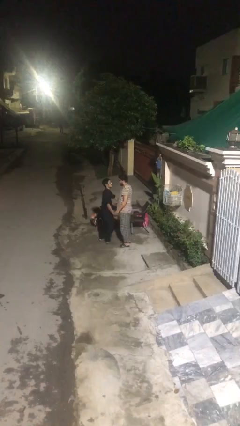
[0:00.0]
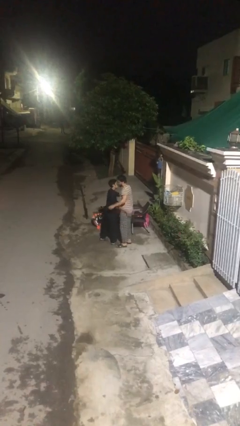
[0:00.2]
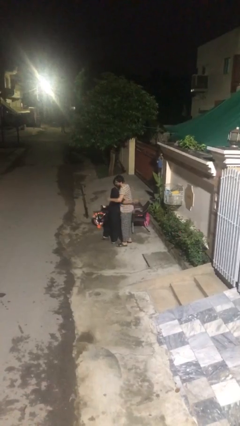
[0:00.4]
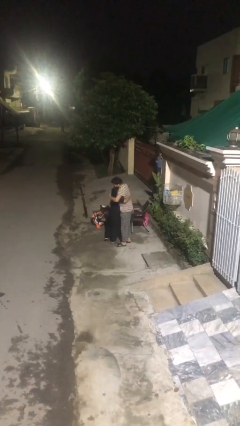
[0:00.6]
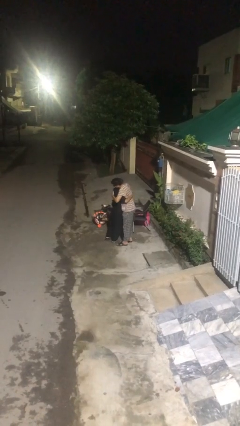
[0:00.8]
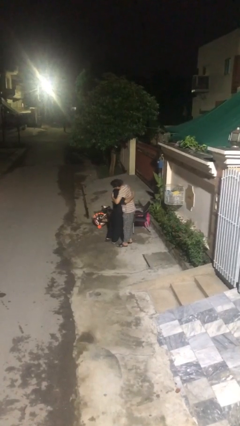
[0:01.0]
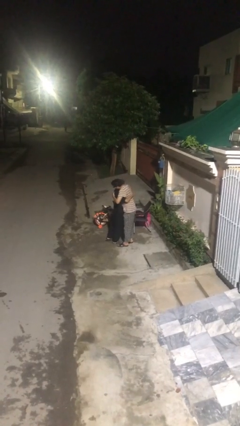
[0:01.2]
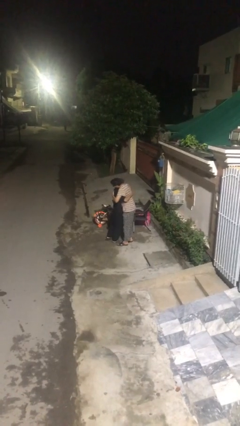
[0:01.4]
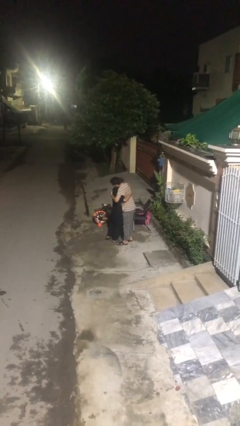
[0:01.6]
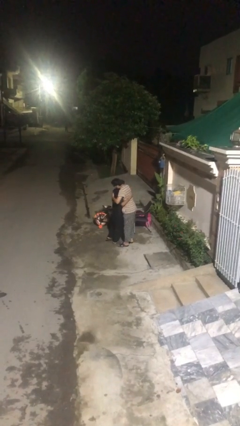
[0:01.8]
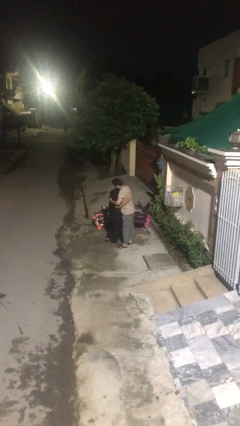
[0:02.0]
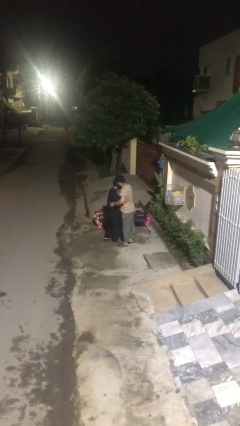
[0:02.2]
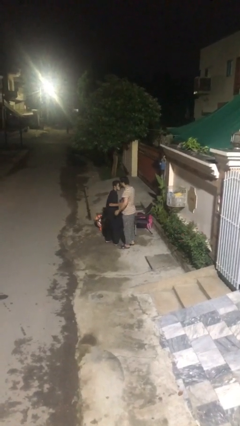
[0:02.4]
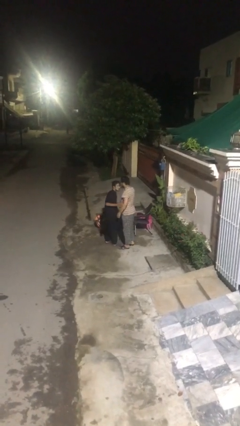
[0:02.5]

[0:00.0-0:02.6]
person embraces person

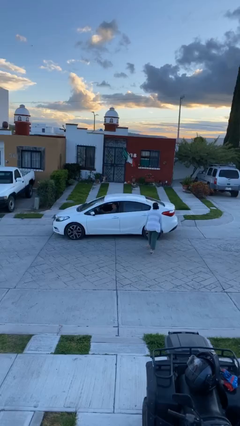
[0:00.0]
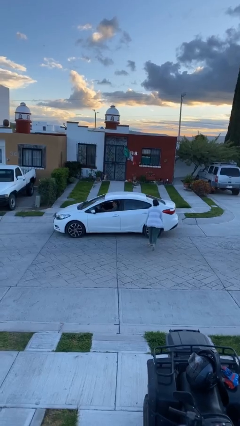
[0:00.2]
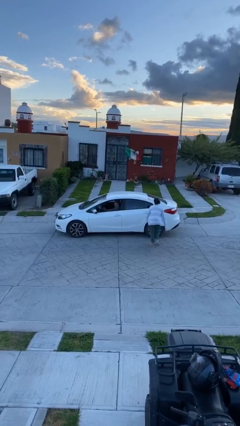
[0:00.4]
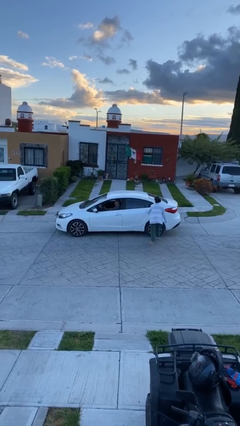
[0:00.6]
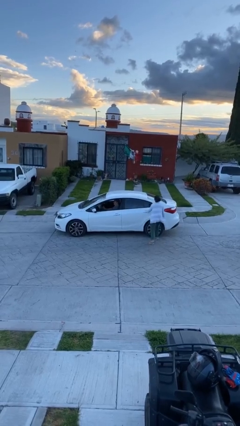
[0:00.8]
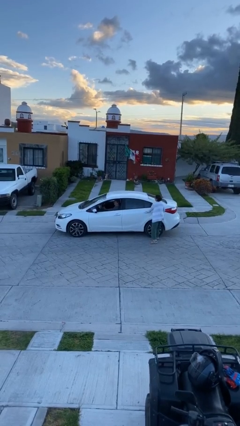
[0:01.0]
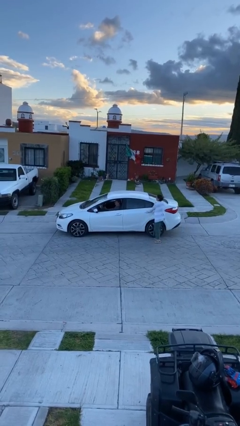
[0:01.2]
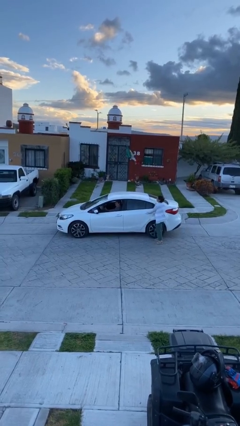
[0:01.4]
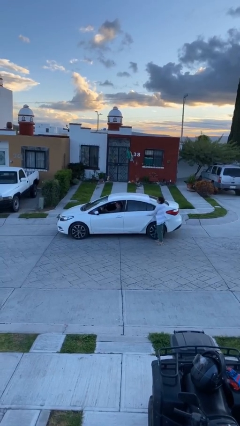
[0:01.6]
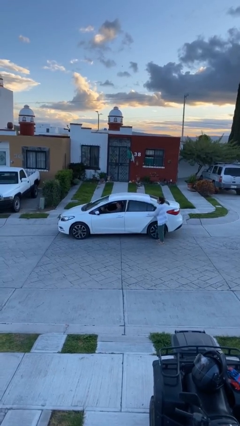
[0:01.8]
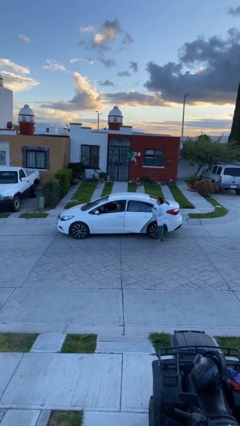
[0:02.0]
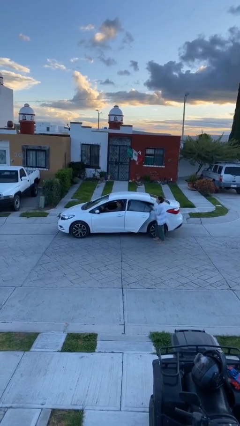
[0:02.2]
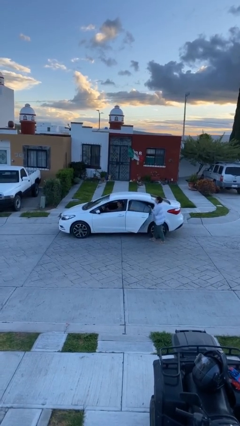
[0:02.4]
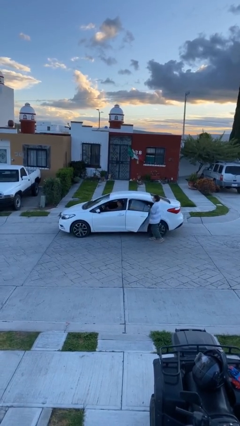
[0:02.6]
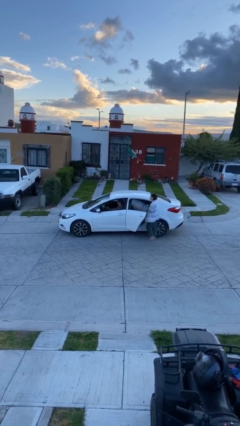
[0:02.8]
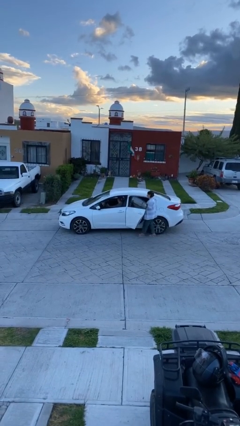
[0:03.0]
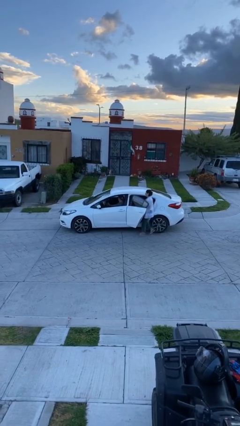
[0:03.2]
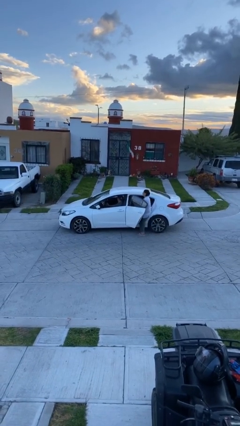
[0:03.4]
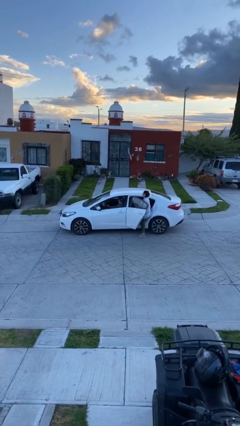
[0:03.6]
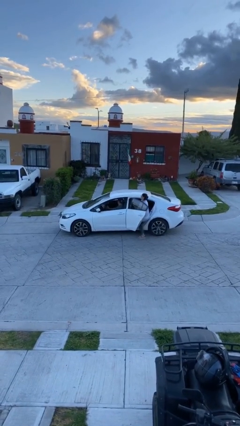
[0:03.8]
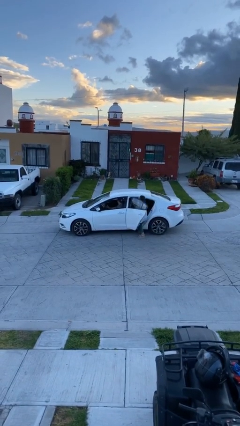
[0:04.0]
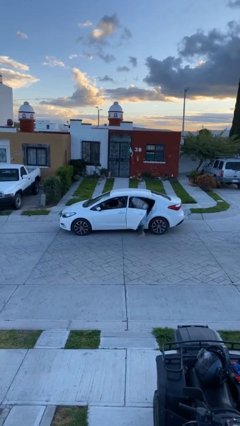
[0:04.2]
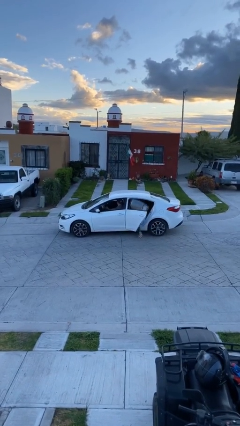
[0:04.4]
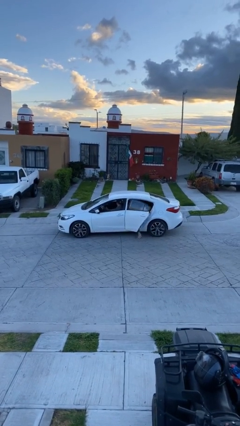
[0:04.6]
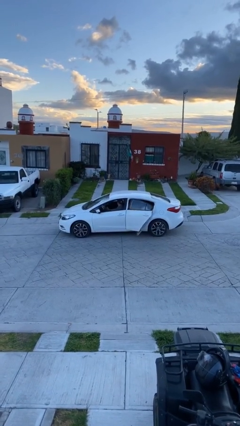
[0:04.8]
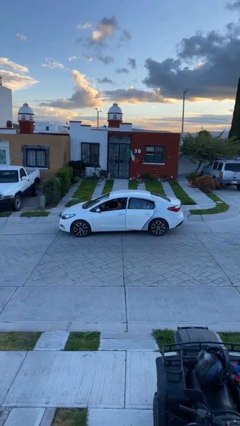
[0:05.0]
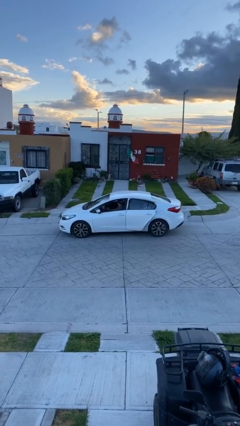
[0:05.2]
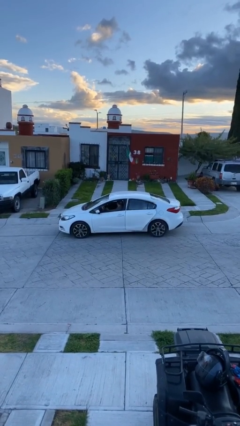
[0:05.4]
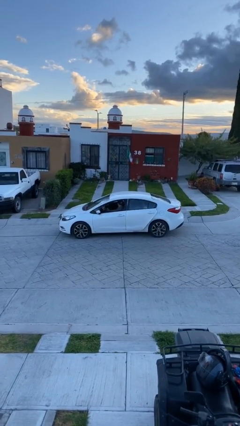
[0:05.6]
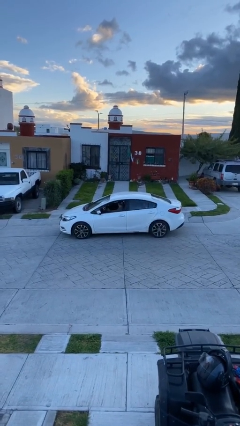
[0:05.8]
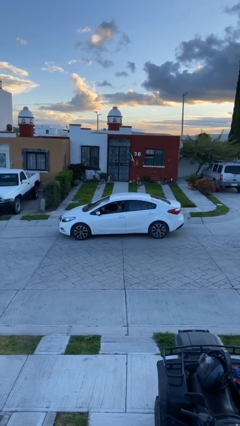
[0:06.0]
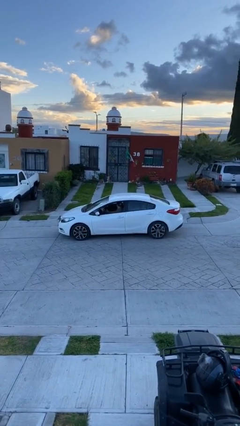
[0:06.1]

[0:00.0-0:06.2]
car picks up person

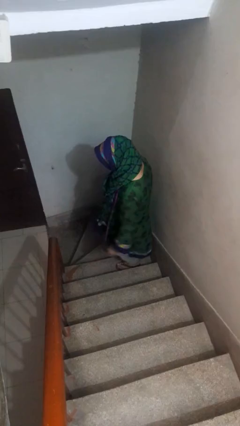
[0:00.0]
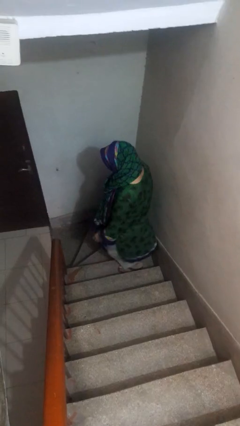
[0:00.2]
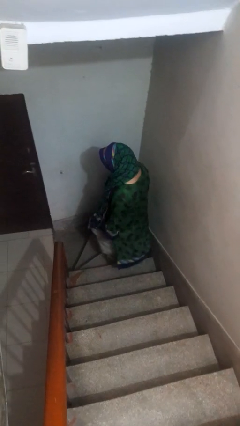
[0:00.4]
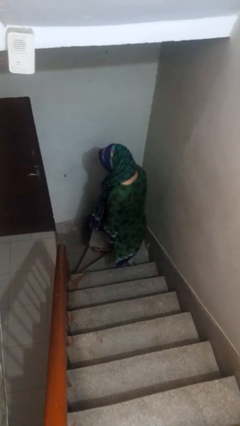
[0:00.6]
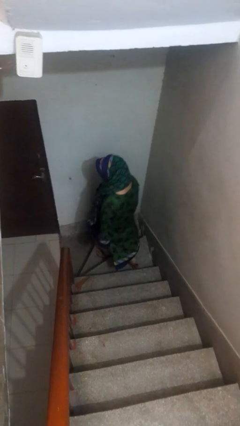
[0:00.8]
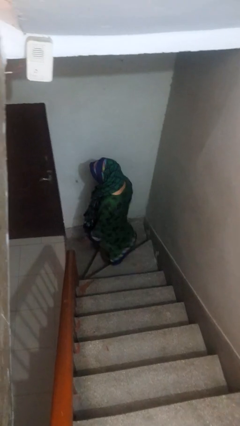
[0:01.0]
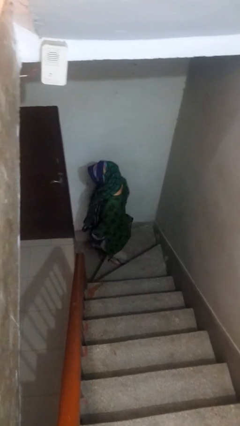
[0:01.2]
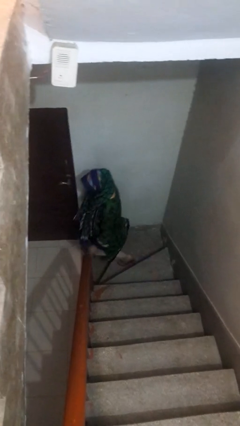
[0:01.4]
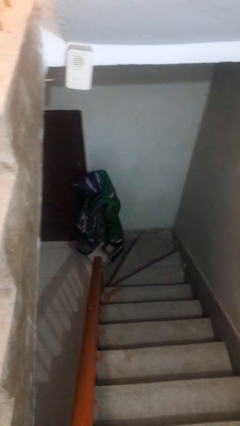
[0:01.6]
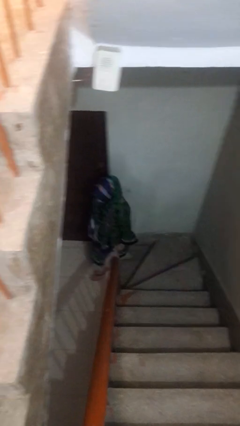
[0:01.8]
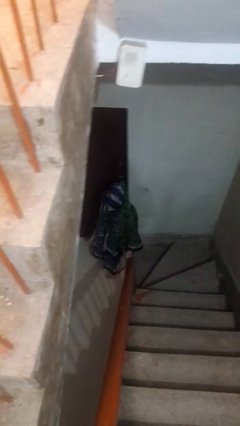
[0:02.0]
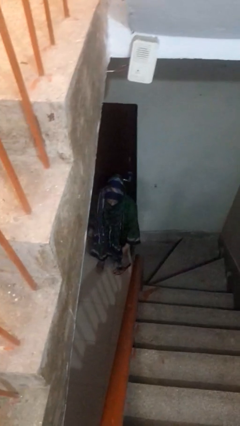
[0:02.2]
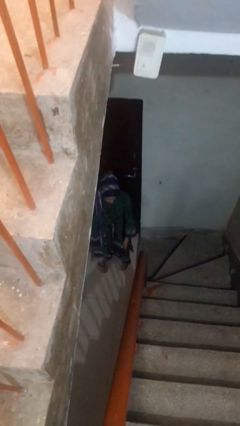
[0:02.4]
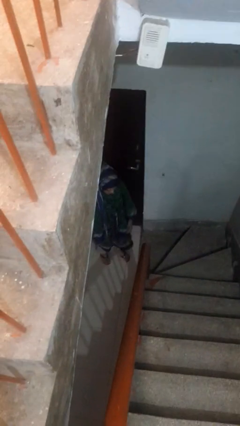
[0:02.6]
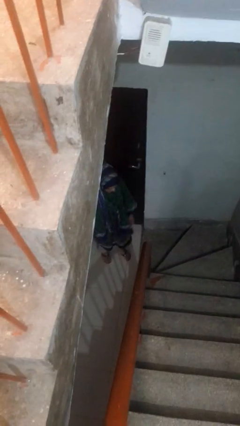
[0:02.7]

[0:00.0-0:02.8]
person climbs down stairs

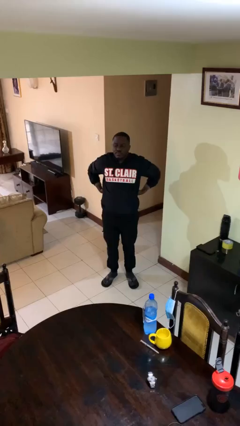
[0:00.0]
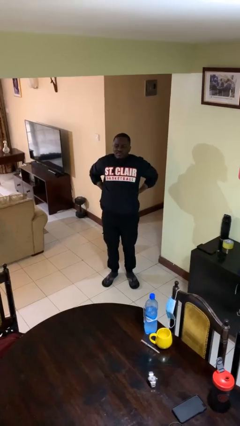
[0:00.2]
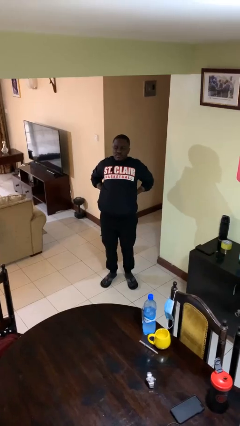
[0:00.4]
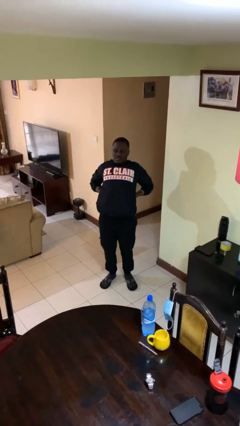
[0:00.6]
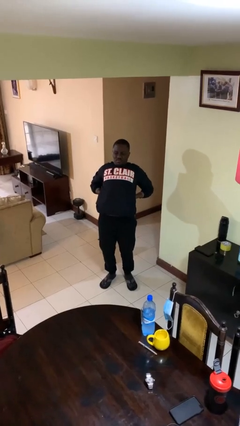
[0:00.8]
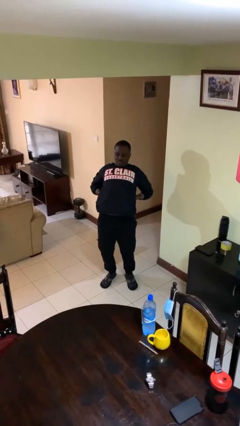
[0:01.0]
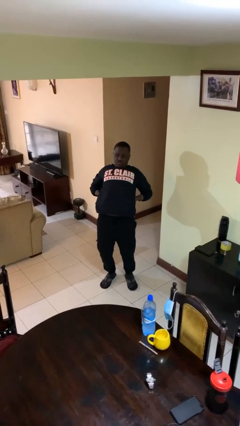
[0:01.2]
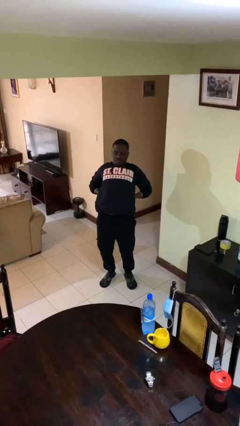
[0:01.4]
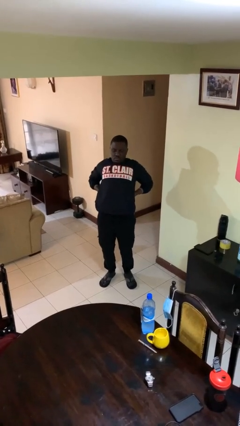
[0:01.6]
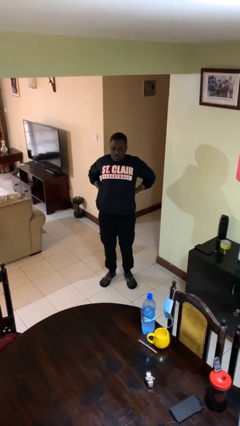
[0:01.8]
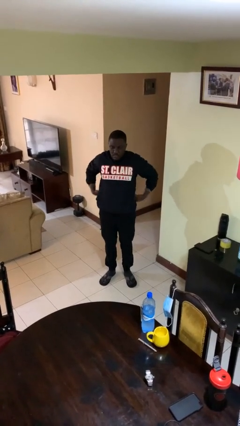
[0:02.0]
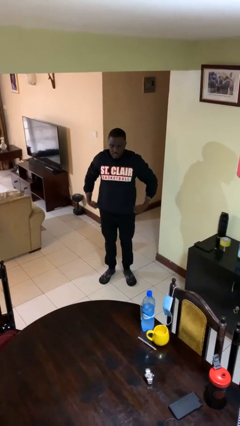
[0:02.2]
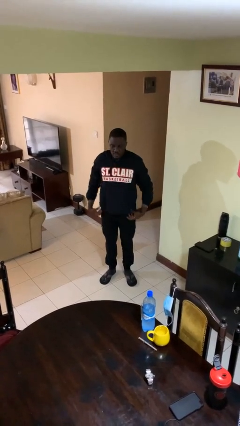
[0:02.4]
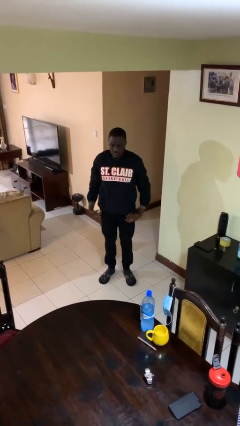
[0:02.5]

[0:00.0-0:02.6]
person stretches back

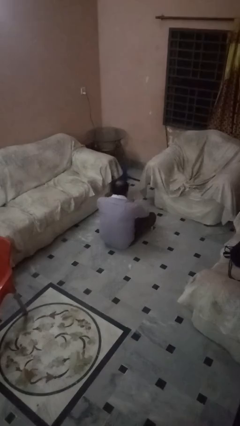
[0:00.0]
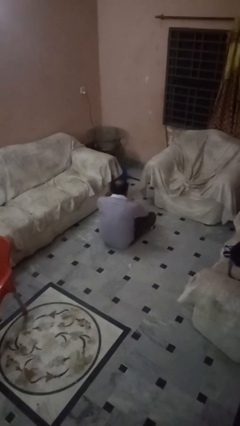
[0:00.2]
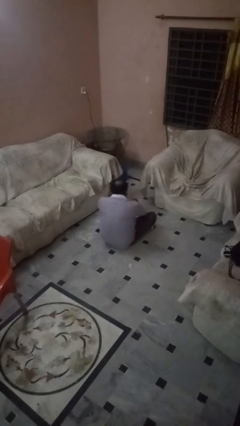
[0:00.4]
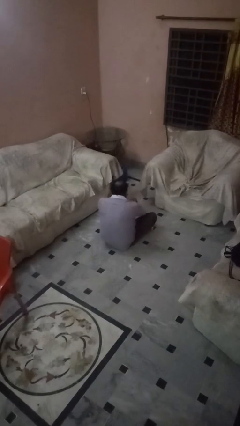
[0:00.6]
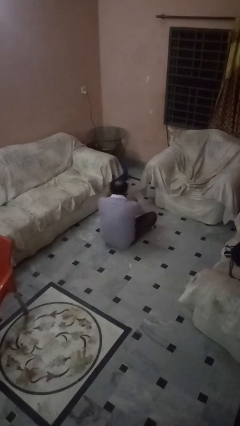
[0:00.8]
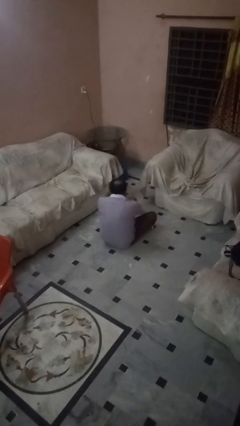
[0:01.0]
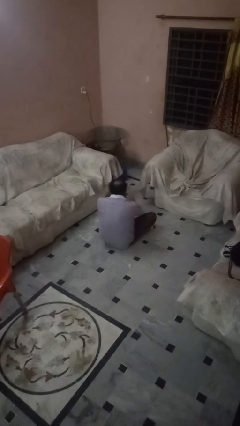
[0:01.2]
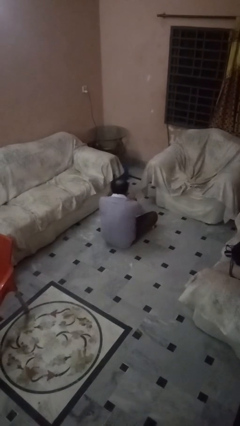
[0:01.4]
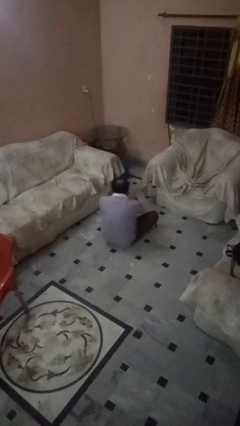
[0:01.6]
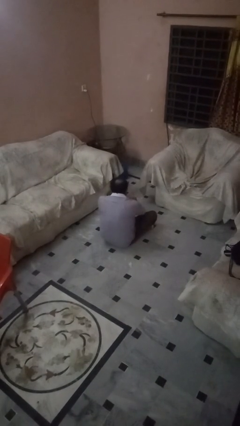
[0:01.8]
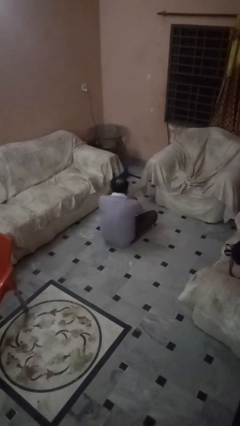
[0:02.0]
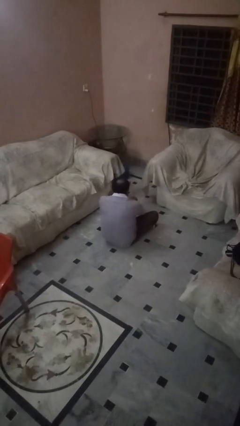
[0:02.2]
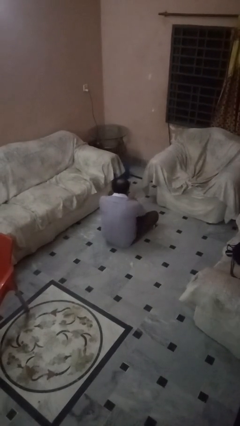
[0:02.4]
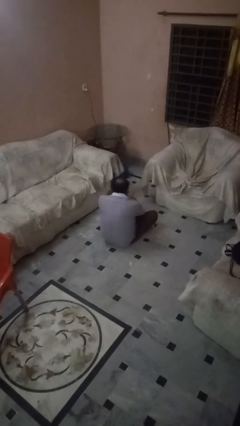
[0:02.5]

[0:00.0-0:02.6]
person rubs foot

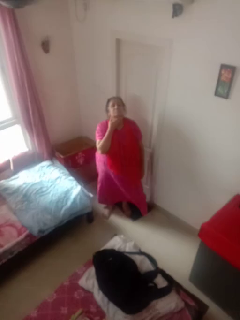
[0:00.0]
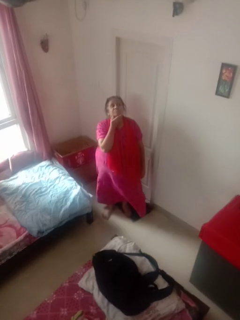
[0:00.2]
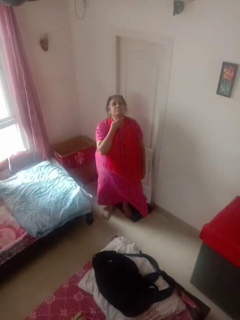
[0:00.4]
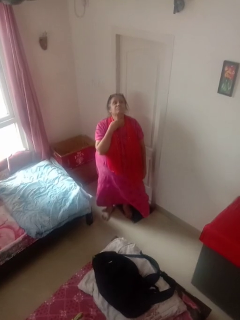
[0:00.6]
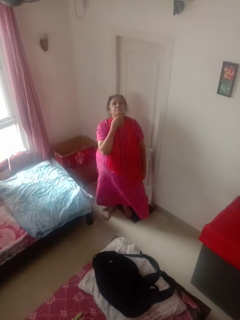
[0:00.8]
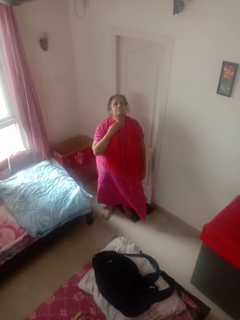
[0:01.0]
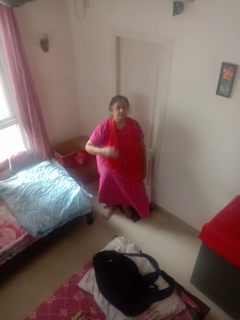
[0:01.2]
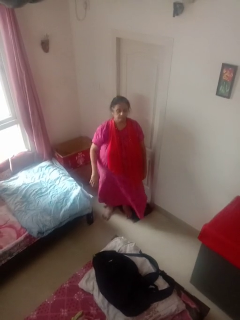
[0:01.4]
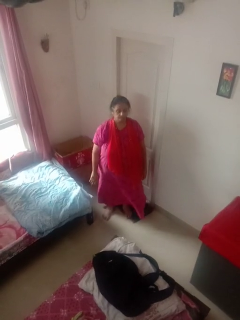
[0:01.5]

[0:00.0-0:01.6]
person rubs neck
